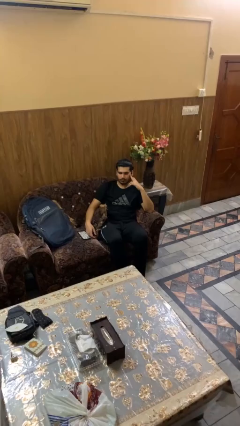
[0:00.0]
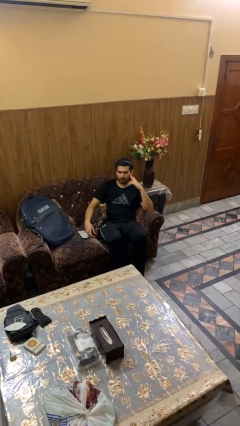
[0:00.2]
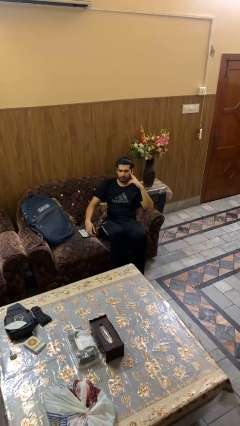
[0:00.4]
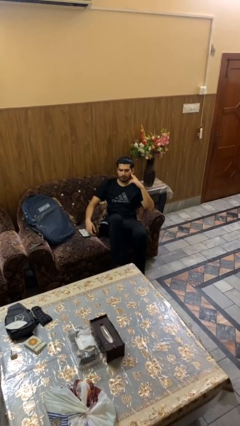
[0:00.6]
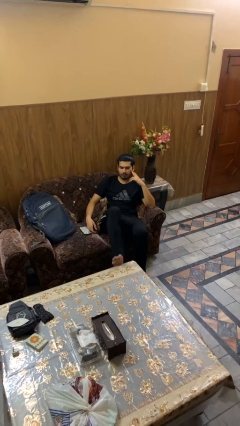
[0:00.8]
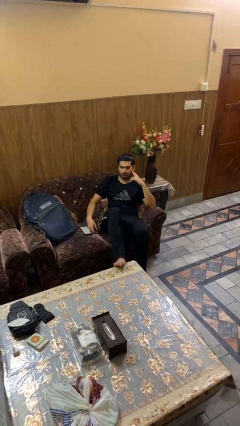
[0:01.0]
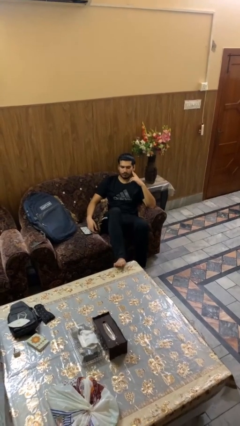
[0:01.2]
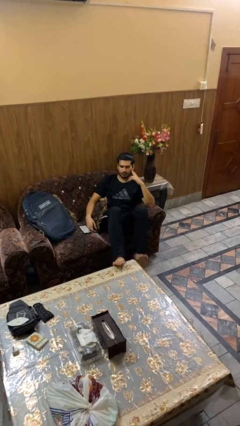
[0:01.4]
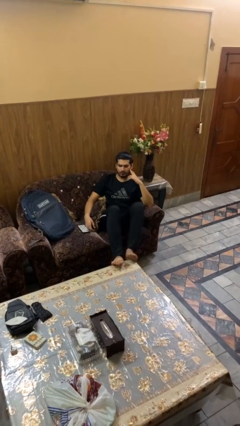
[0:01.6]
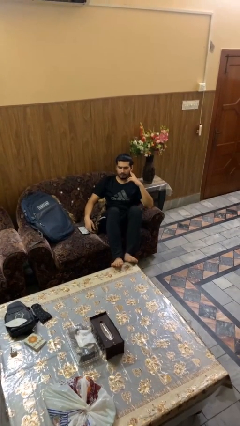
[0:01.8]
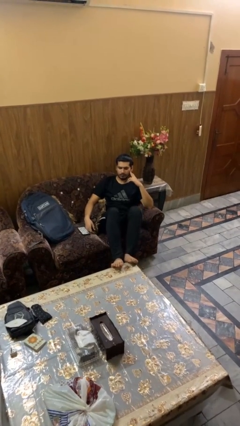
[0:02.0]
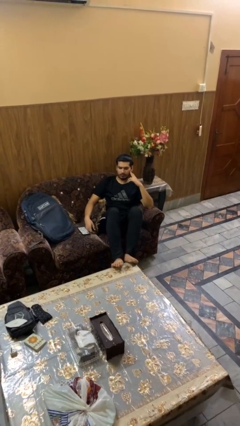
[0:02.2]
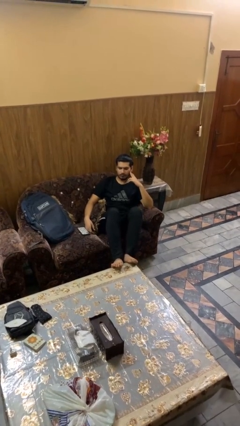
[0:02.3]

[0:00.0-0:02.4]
person puts feet up

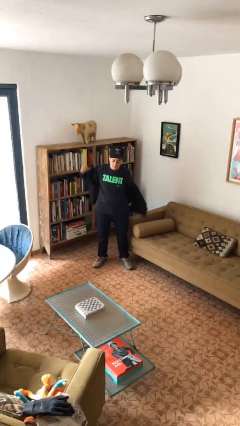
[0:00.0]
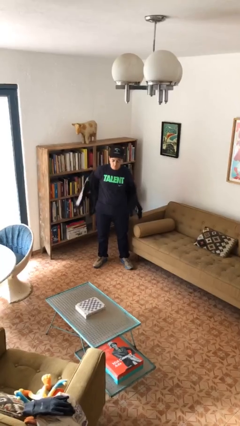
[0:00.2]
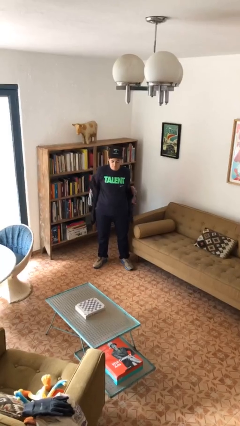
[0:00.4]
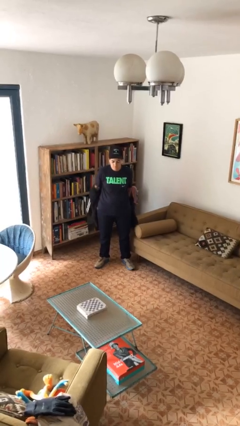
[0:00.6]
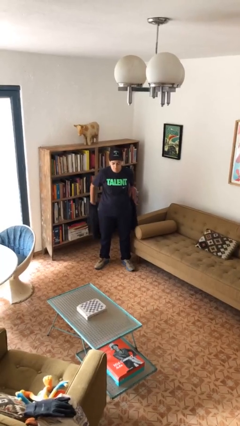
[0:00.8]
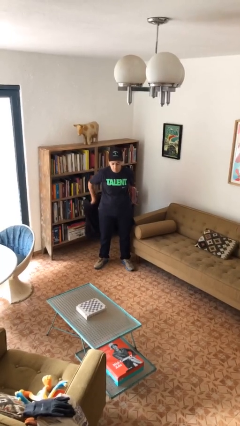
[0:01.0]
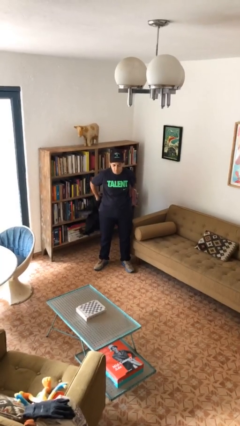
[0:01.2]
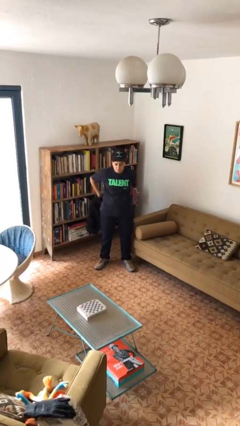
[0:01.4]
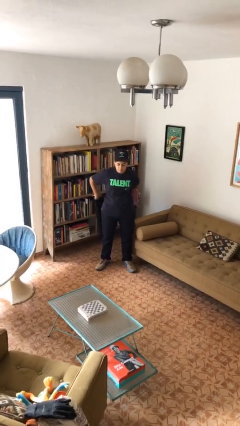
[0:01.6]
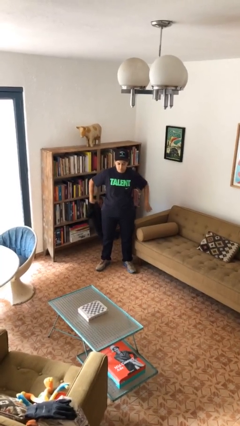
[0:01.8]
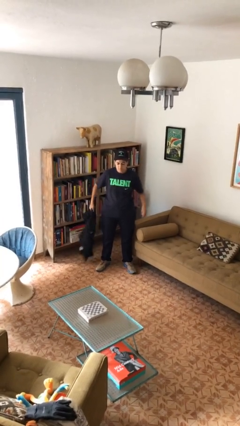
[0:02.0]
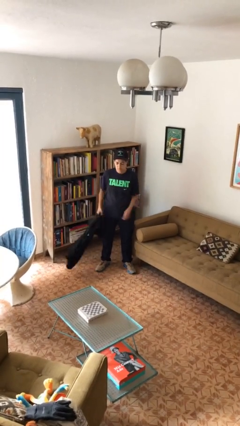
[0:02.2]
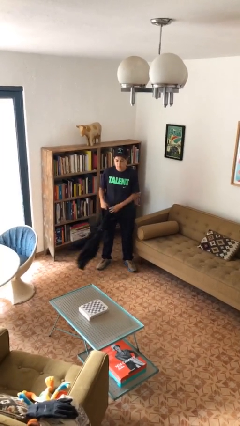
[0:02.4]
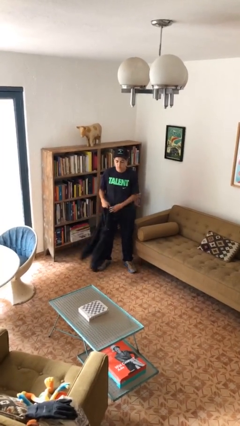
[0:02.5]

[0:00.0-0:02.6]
person takes off jacket

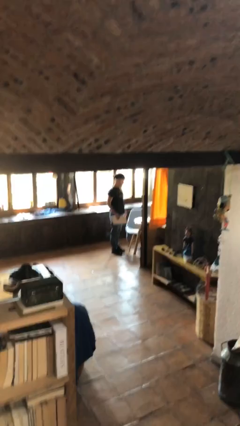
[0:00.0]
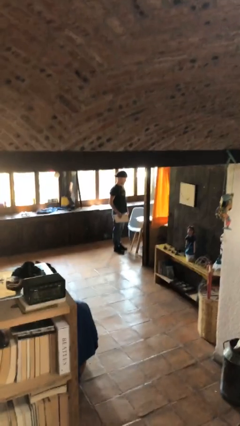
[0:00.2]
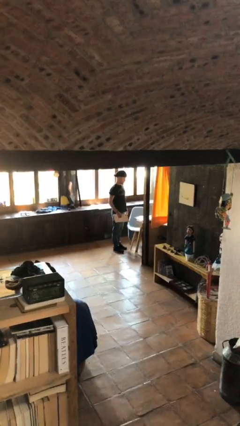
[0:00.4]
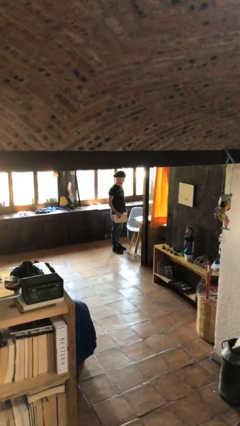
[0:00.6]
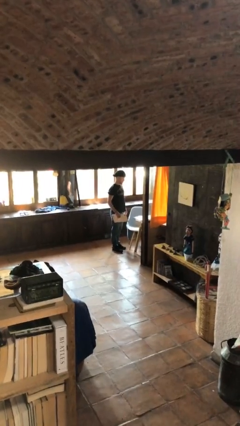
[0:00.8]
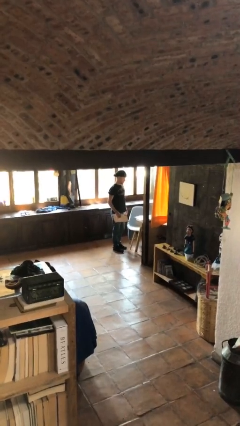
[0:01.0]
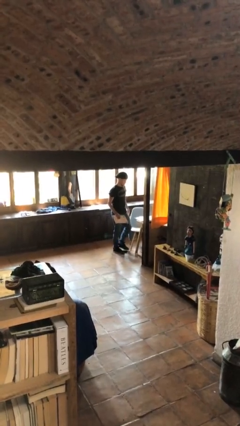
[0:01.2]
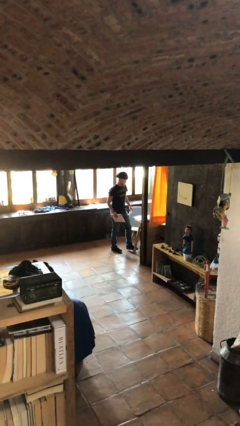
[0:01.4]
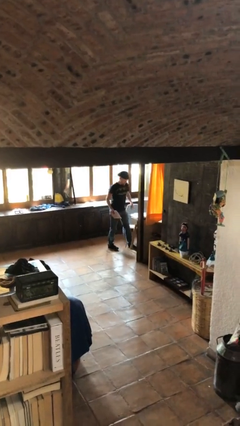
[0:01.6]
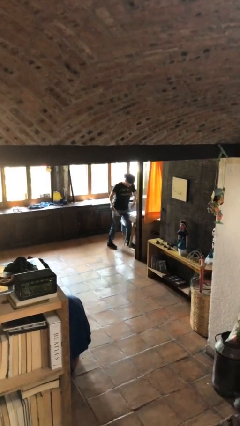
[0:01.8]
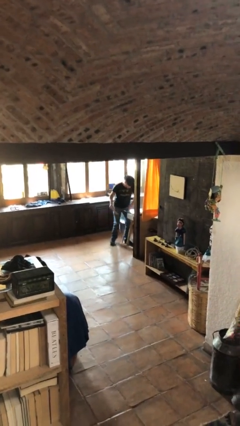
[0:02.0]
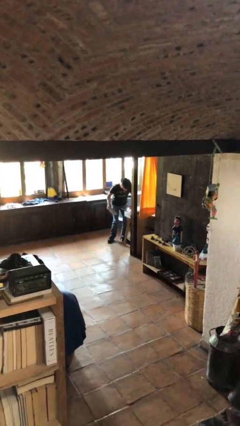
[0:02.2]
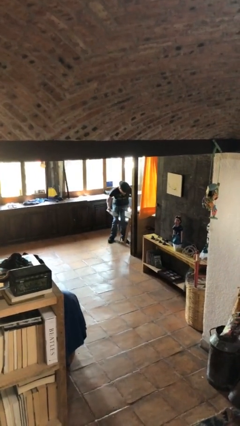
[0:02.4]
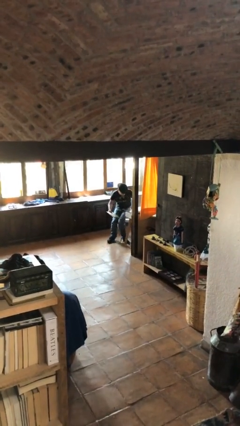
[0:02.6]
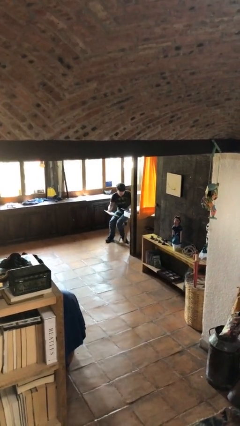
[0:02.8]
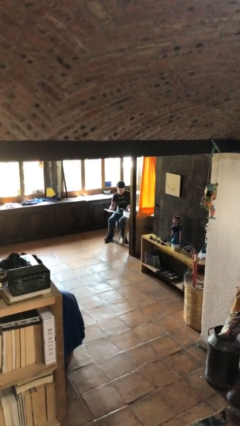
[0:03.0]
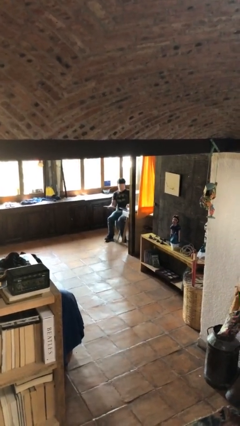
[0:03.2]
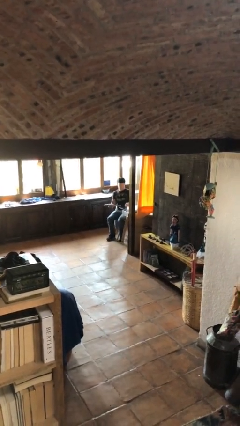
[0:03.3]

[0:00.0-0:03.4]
person sits down

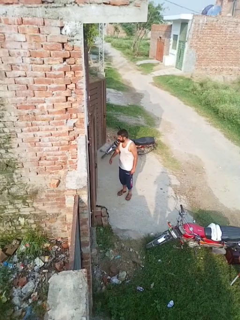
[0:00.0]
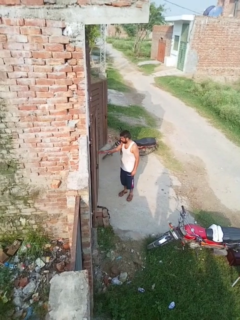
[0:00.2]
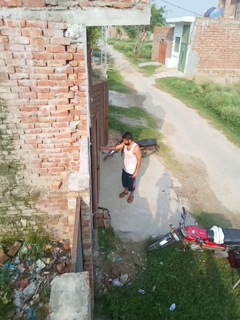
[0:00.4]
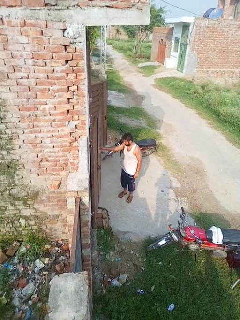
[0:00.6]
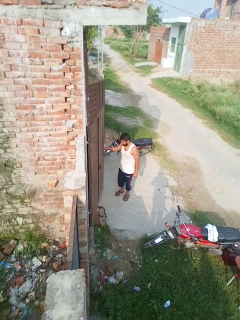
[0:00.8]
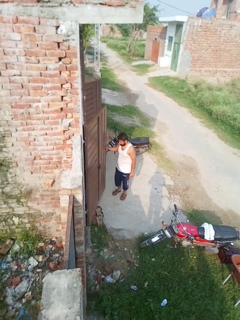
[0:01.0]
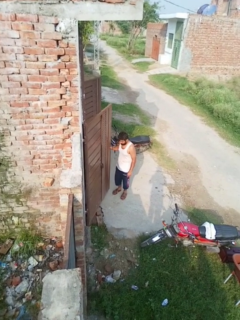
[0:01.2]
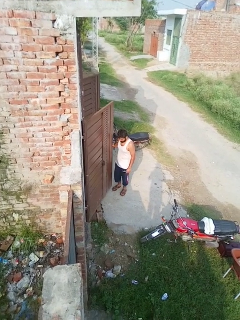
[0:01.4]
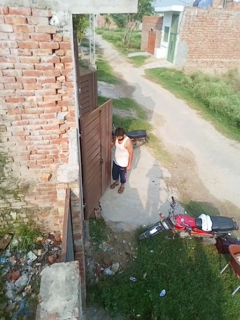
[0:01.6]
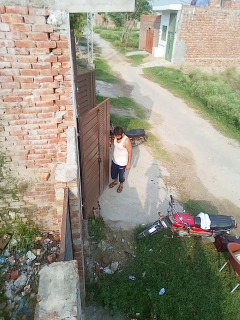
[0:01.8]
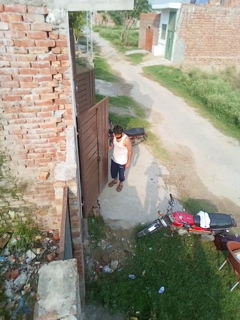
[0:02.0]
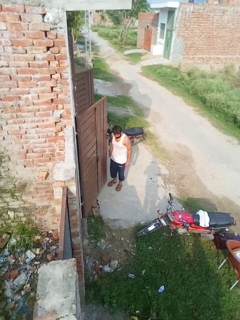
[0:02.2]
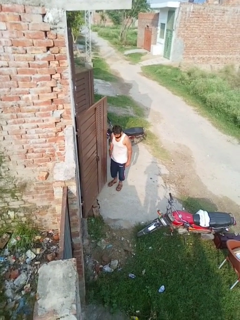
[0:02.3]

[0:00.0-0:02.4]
person opens facility door

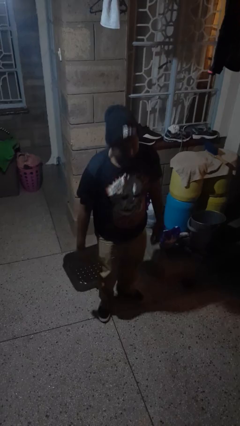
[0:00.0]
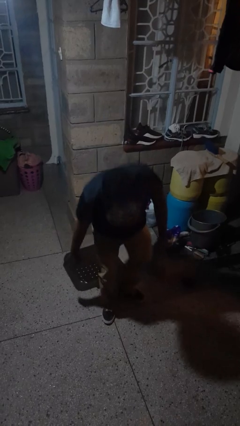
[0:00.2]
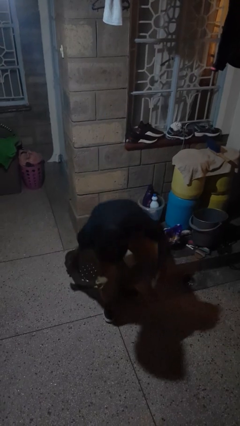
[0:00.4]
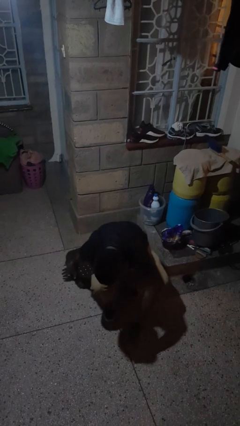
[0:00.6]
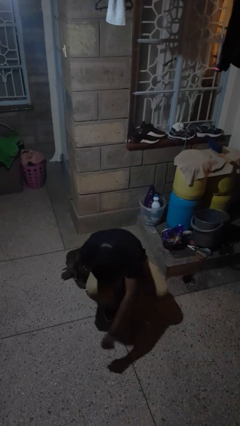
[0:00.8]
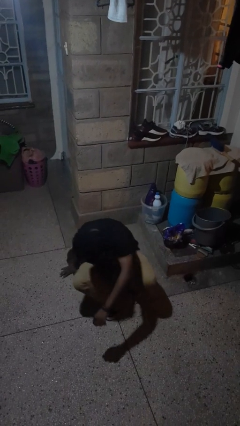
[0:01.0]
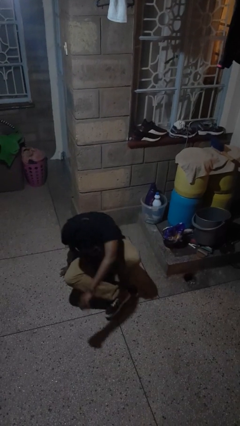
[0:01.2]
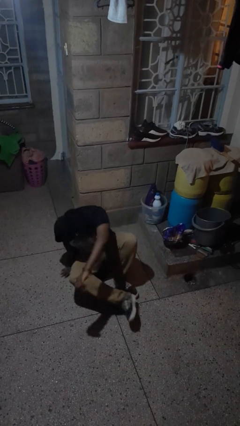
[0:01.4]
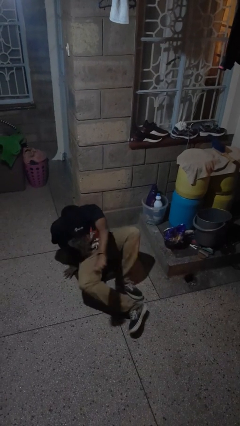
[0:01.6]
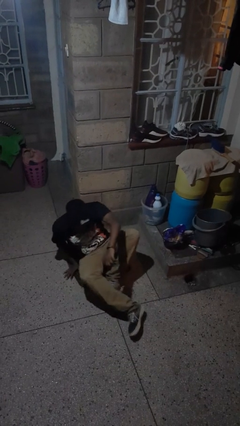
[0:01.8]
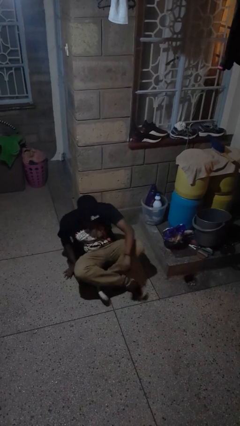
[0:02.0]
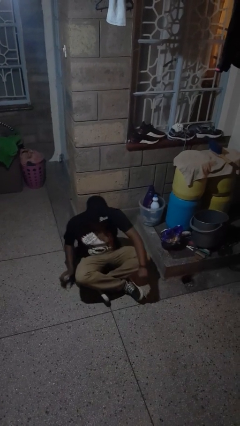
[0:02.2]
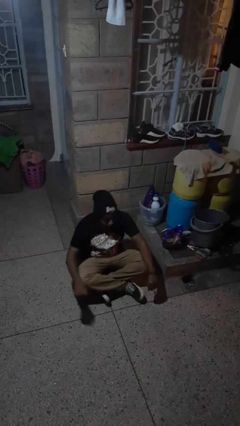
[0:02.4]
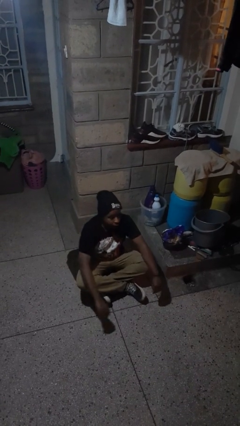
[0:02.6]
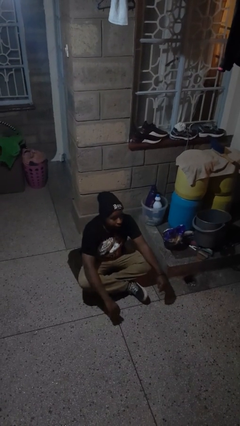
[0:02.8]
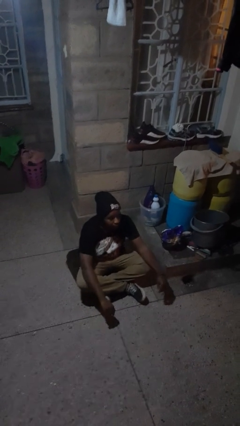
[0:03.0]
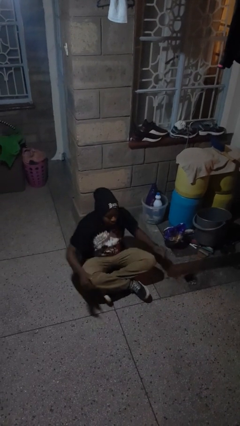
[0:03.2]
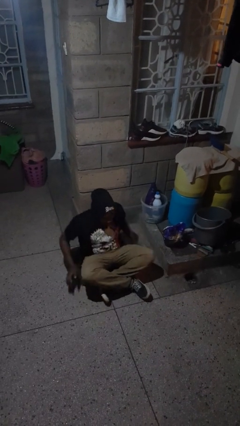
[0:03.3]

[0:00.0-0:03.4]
person sits crisscross

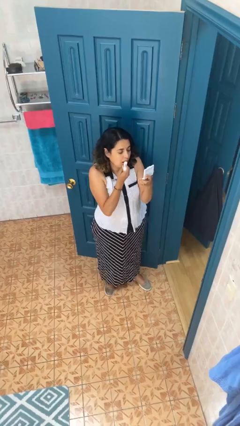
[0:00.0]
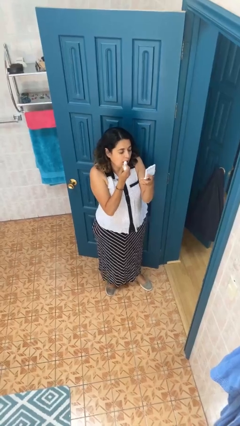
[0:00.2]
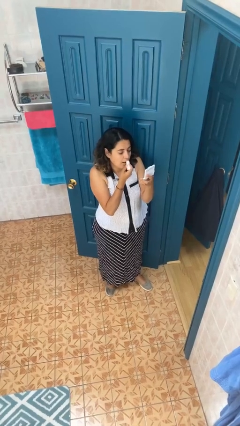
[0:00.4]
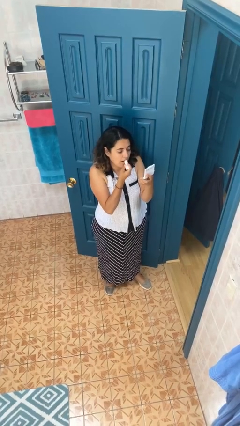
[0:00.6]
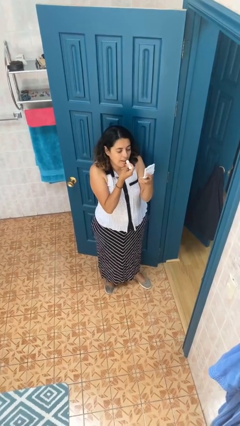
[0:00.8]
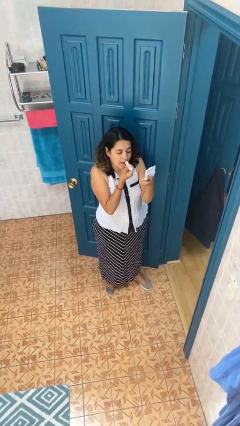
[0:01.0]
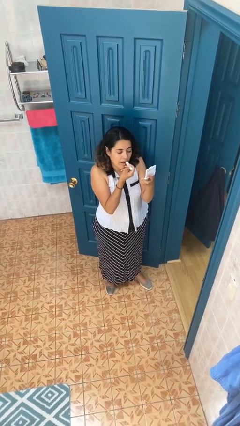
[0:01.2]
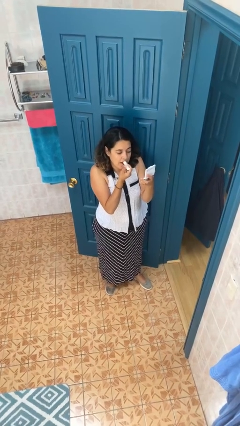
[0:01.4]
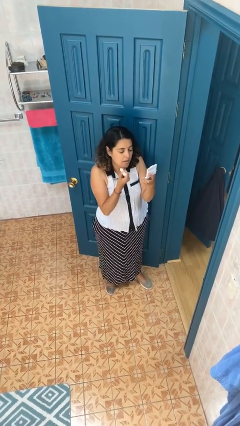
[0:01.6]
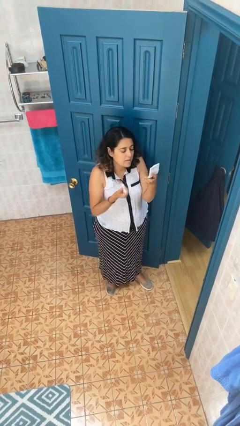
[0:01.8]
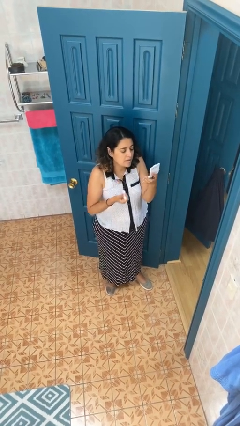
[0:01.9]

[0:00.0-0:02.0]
person applies lip makeup

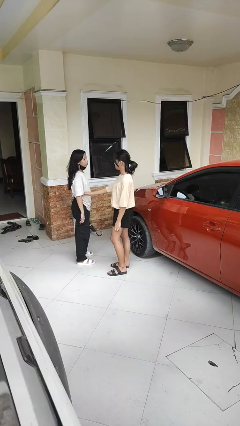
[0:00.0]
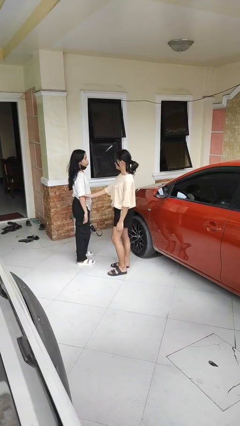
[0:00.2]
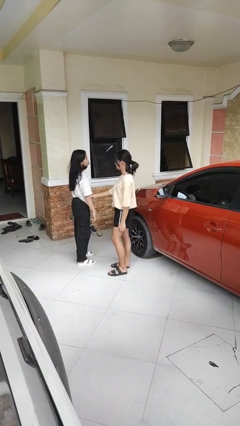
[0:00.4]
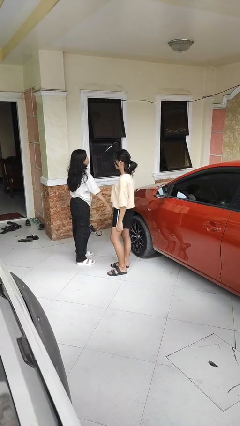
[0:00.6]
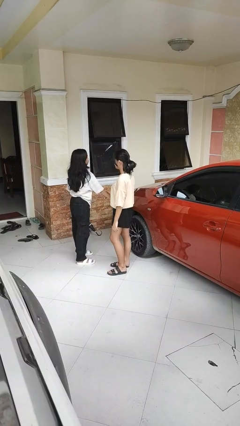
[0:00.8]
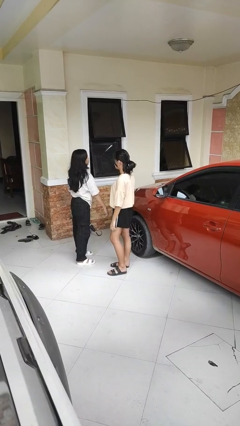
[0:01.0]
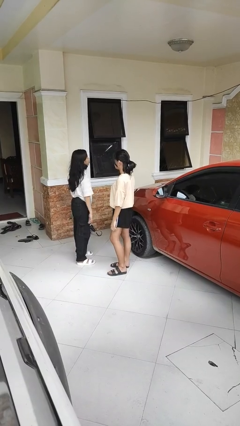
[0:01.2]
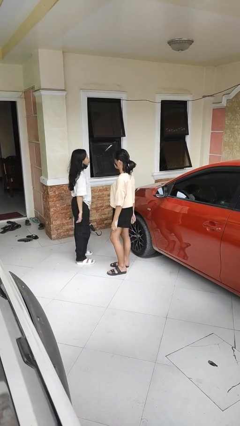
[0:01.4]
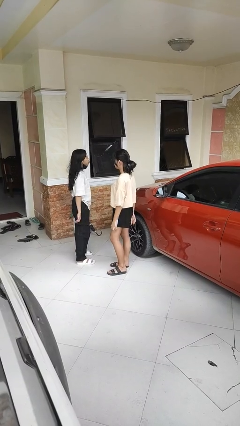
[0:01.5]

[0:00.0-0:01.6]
person grabs person by forearm

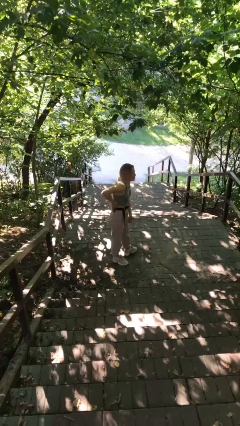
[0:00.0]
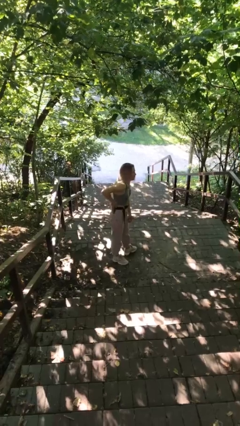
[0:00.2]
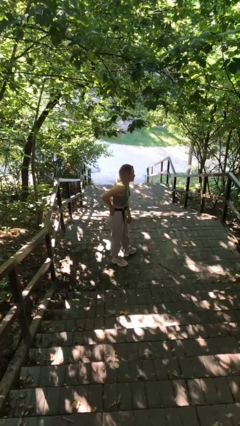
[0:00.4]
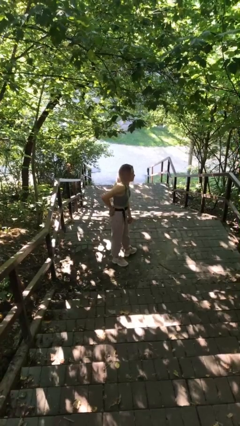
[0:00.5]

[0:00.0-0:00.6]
person puts phone into pocket
